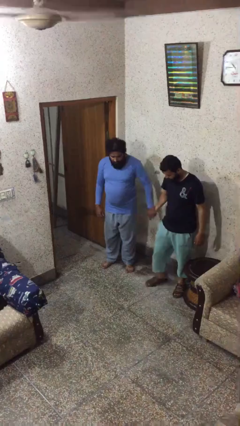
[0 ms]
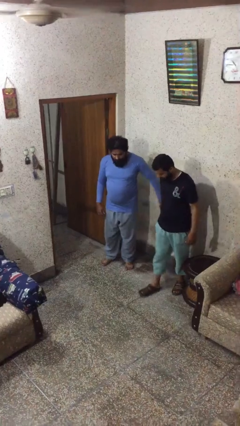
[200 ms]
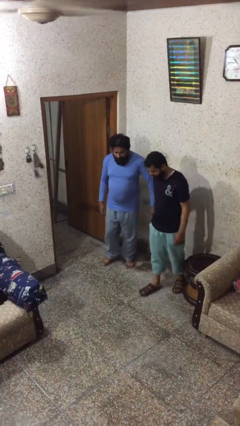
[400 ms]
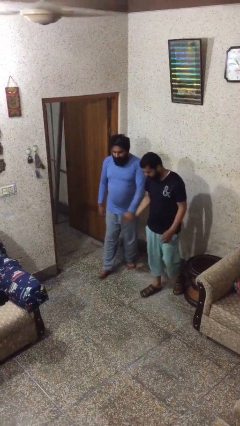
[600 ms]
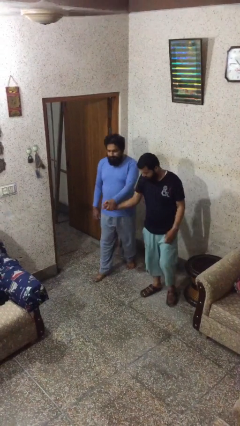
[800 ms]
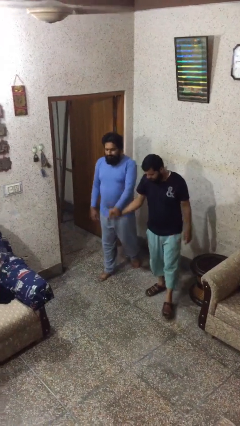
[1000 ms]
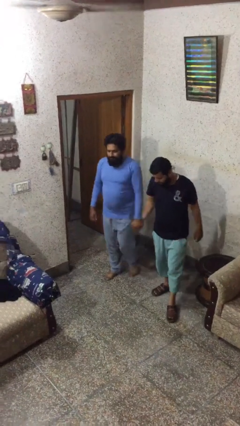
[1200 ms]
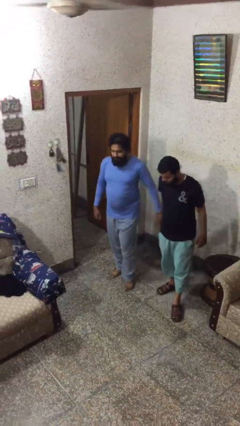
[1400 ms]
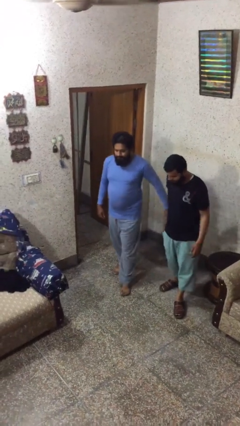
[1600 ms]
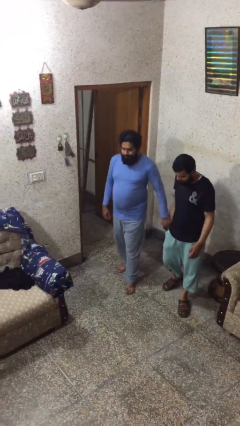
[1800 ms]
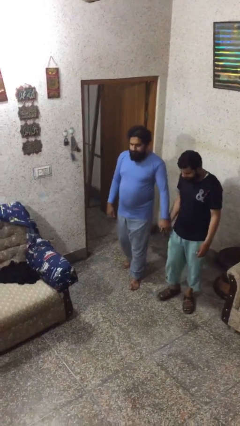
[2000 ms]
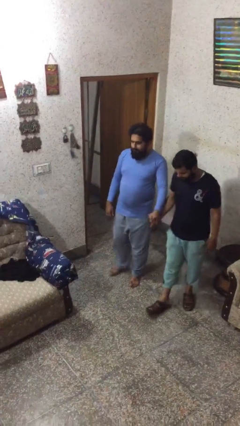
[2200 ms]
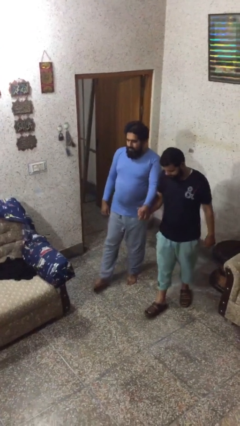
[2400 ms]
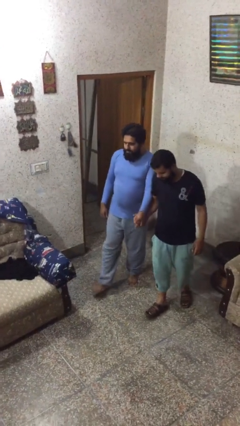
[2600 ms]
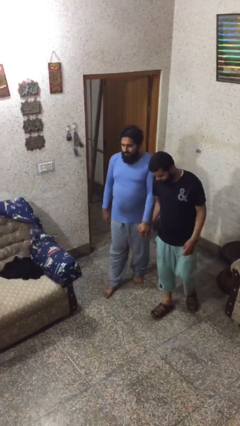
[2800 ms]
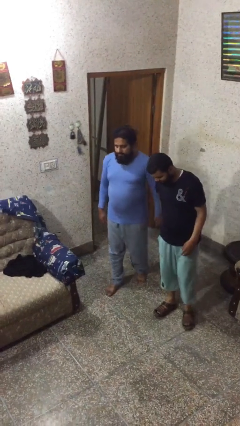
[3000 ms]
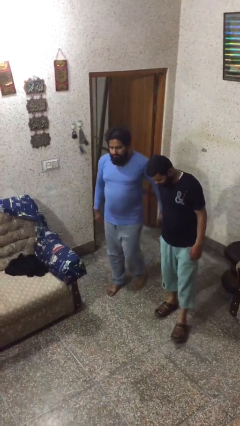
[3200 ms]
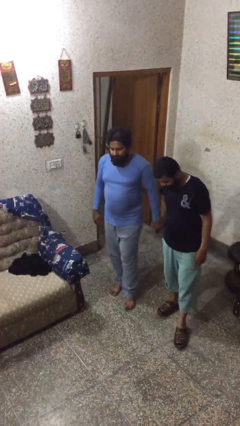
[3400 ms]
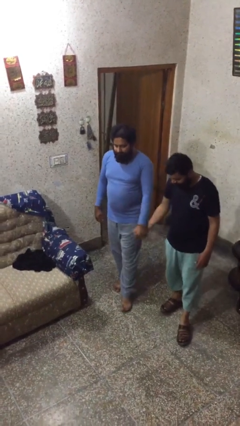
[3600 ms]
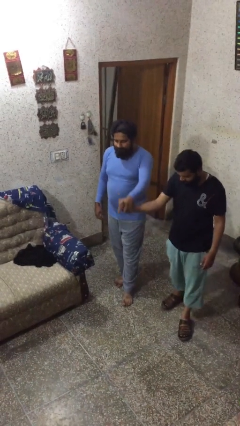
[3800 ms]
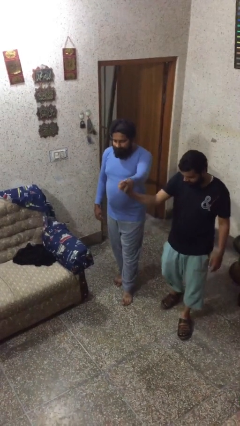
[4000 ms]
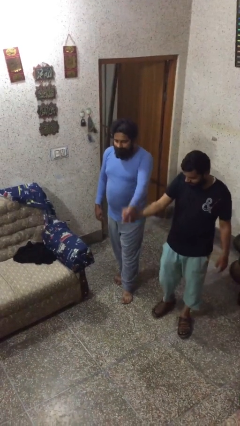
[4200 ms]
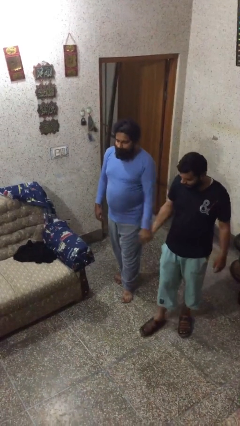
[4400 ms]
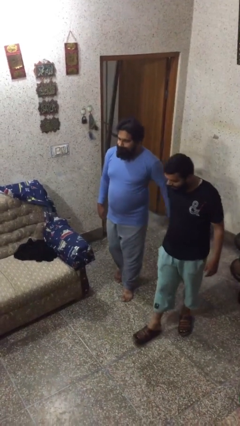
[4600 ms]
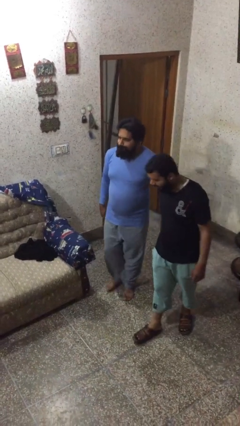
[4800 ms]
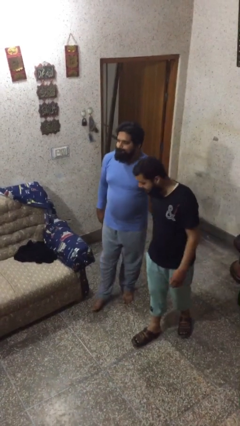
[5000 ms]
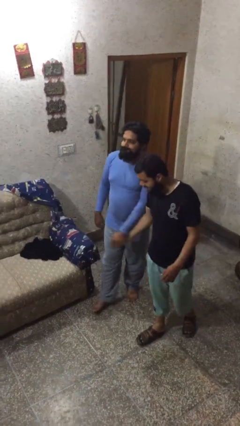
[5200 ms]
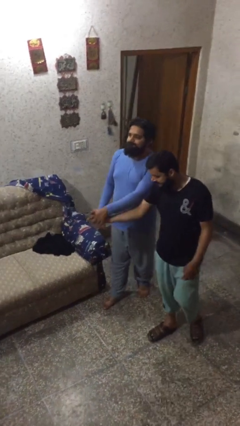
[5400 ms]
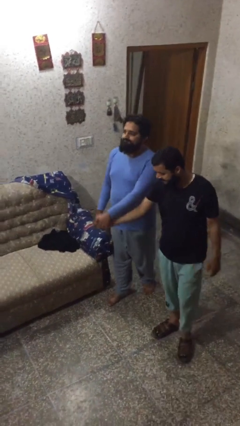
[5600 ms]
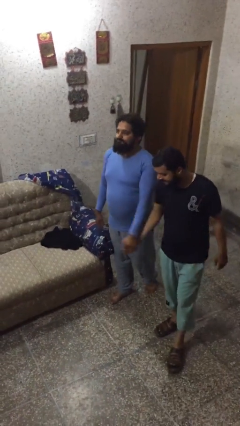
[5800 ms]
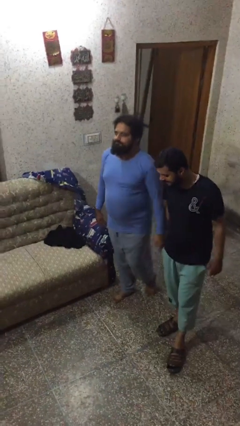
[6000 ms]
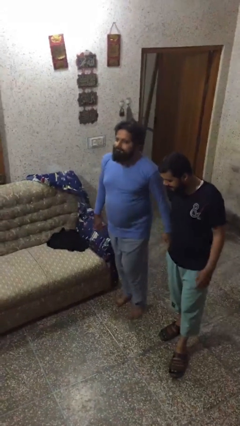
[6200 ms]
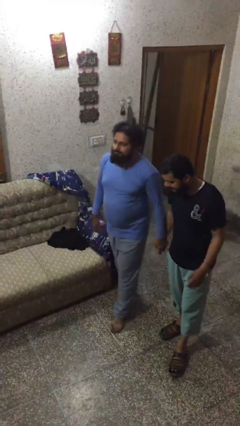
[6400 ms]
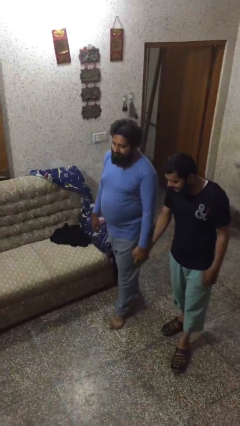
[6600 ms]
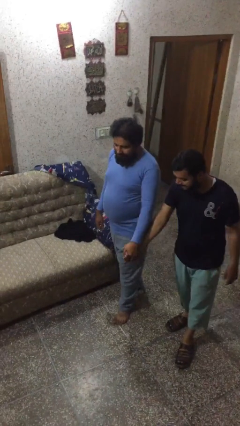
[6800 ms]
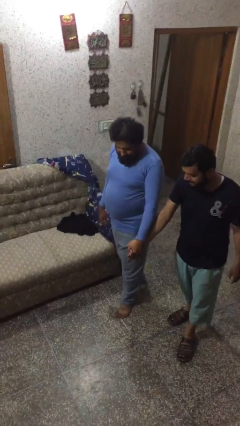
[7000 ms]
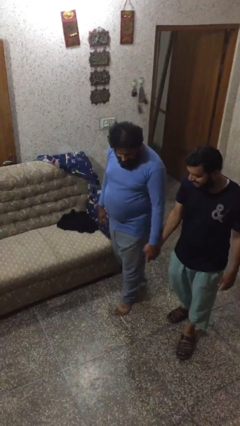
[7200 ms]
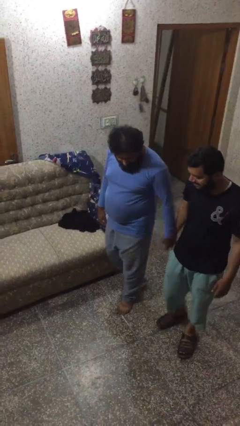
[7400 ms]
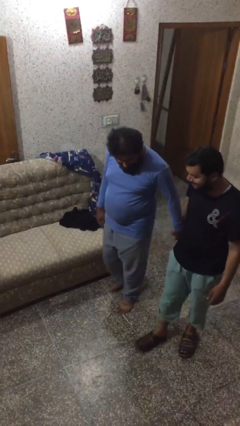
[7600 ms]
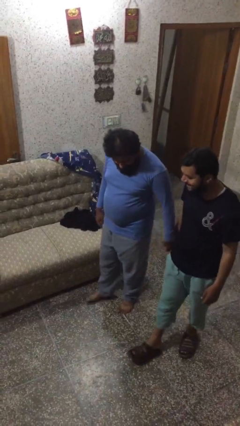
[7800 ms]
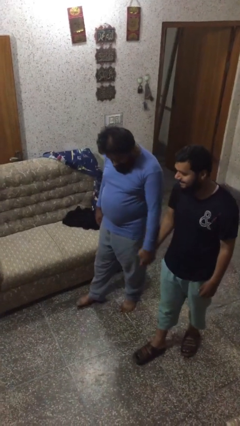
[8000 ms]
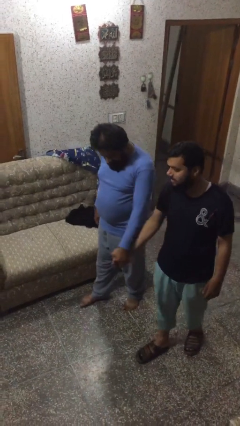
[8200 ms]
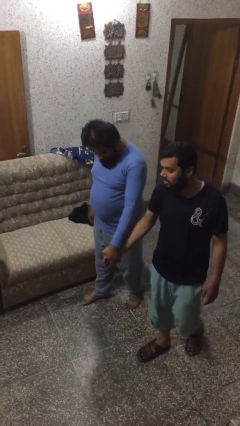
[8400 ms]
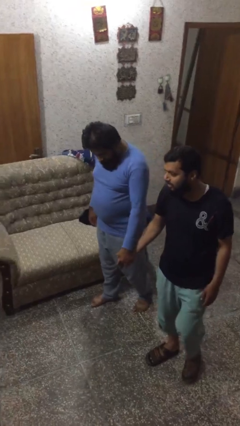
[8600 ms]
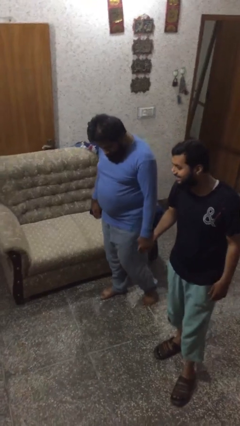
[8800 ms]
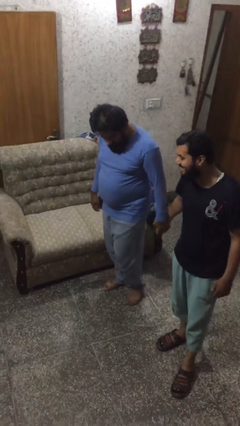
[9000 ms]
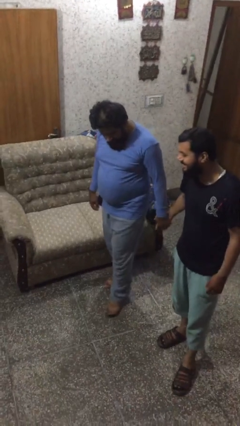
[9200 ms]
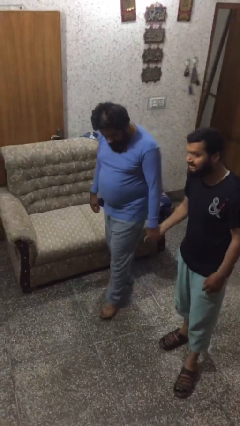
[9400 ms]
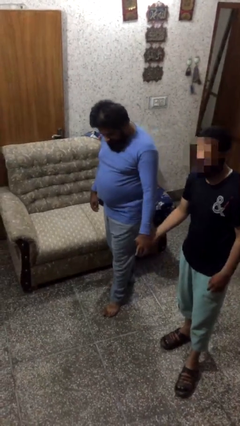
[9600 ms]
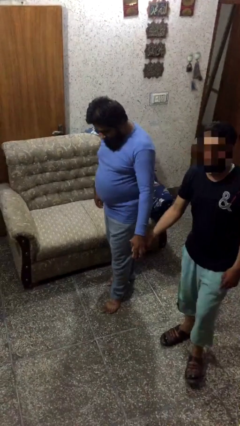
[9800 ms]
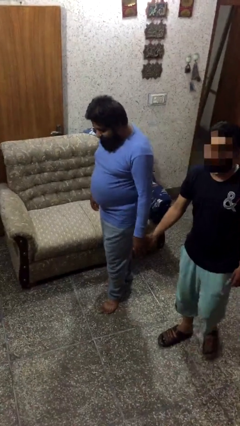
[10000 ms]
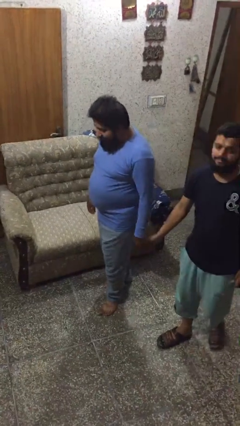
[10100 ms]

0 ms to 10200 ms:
person holds hand

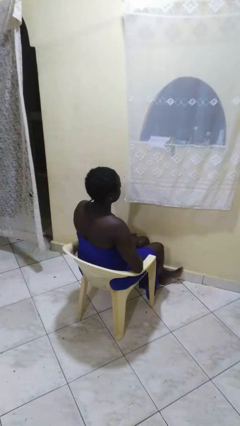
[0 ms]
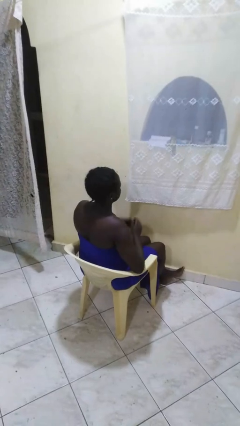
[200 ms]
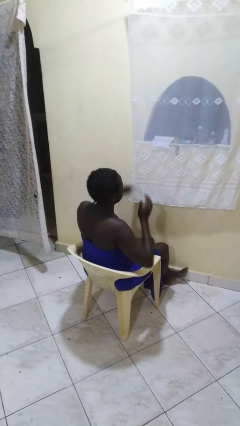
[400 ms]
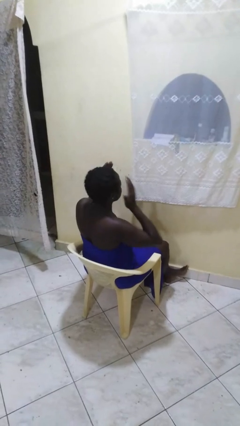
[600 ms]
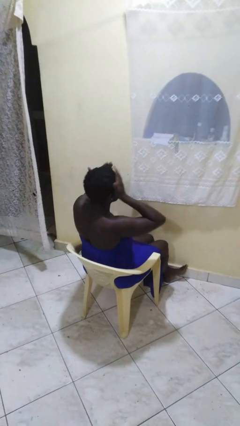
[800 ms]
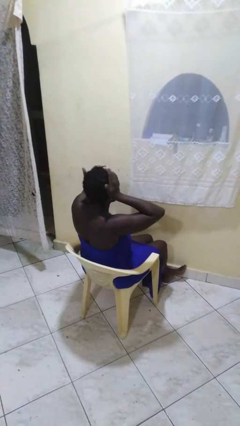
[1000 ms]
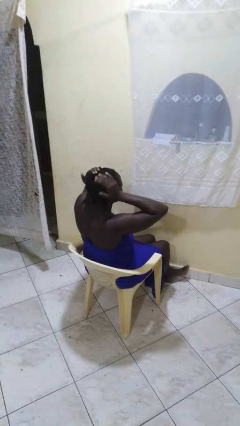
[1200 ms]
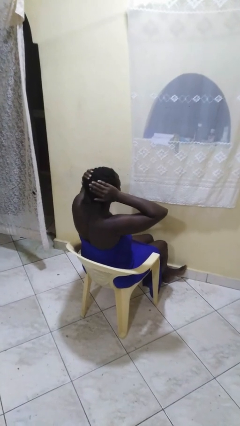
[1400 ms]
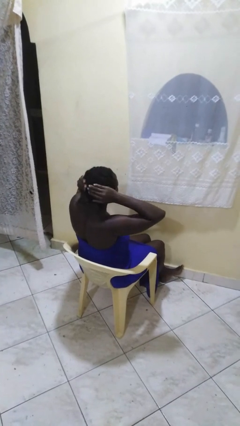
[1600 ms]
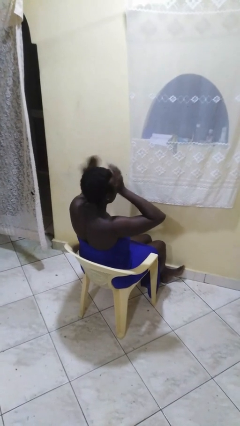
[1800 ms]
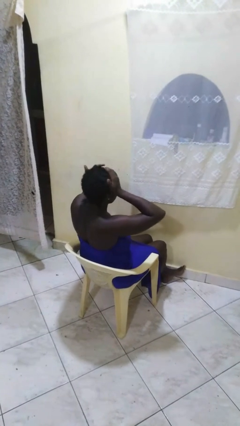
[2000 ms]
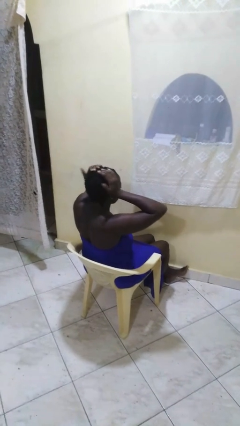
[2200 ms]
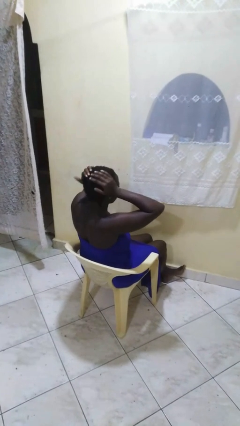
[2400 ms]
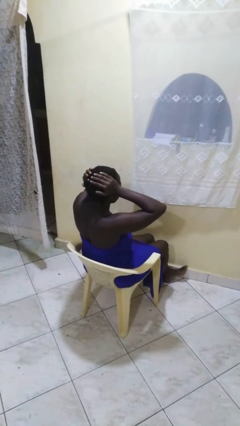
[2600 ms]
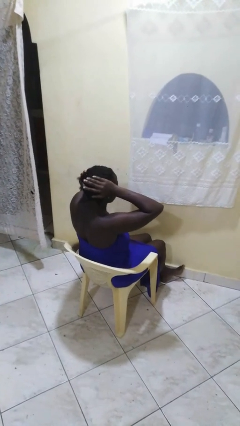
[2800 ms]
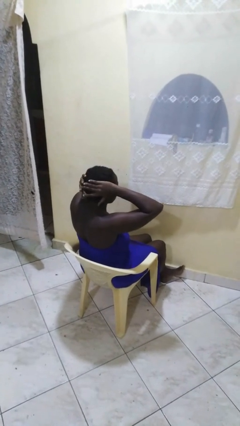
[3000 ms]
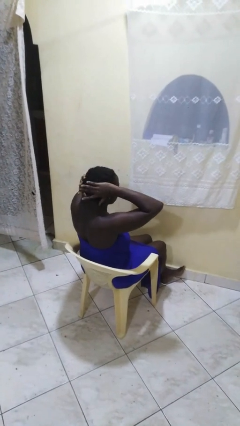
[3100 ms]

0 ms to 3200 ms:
person strokes hair

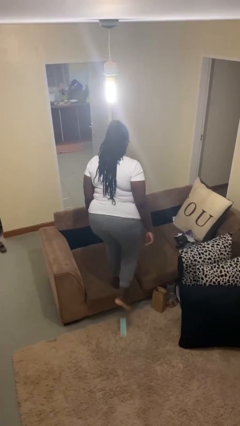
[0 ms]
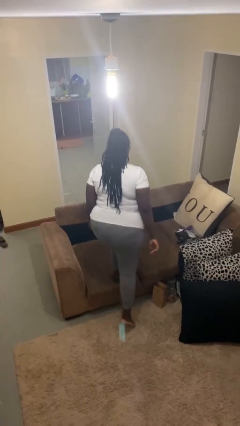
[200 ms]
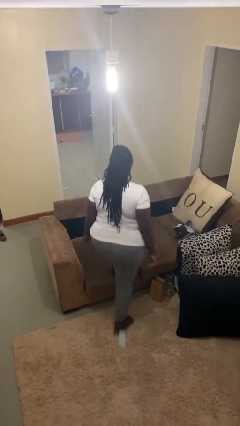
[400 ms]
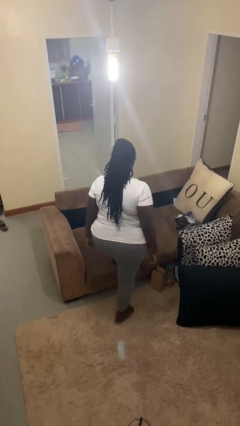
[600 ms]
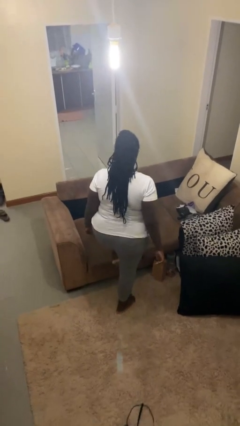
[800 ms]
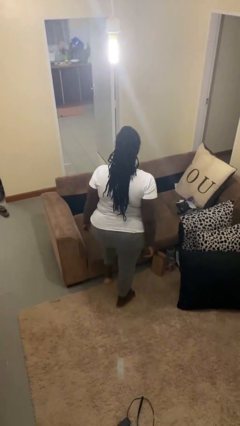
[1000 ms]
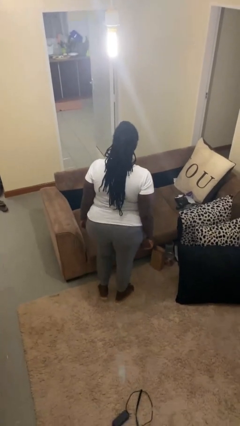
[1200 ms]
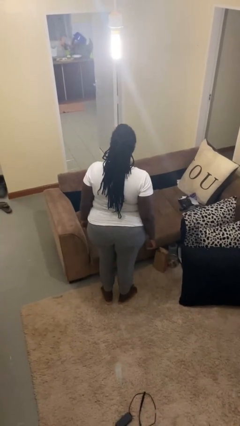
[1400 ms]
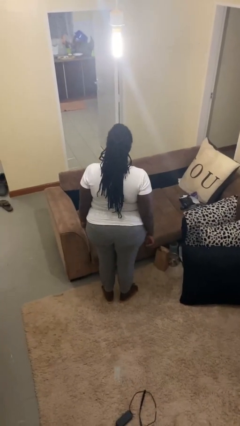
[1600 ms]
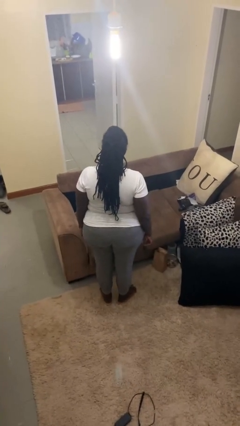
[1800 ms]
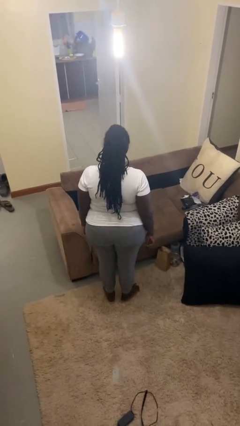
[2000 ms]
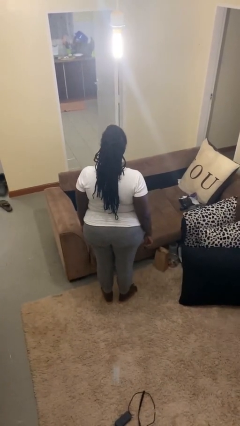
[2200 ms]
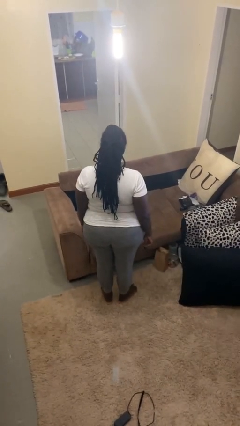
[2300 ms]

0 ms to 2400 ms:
person climbs off couch

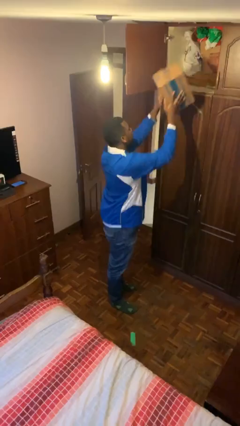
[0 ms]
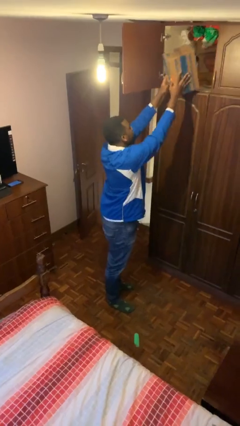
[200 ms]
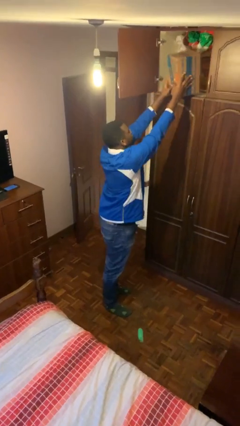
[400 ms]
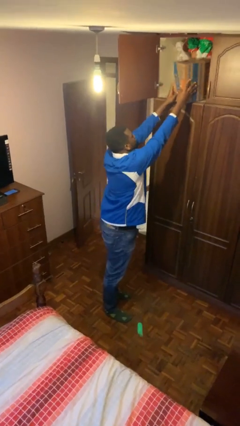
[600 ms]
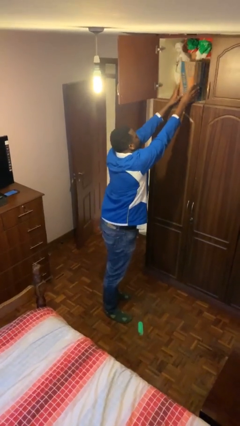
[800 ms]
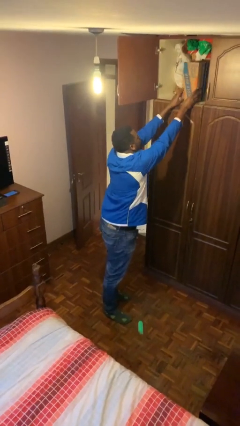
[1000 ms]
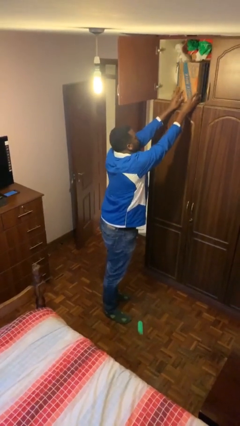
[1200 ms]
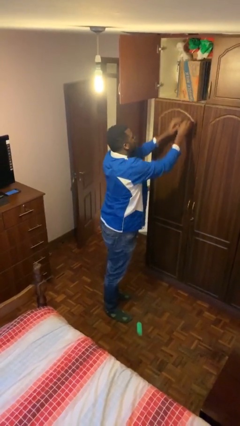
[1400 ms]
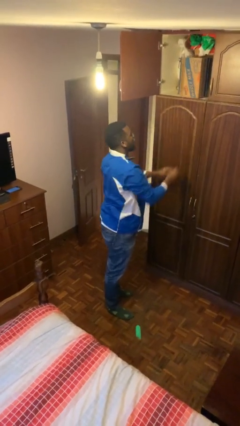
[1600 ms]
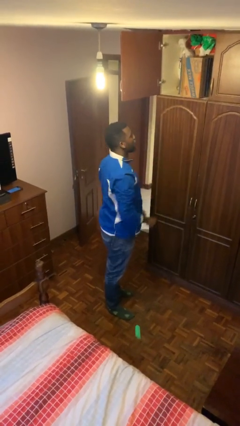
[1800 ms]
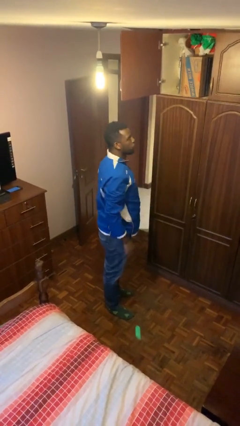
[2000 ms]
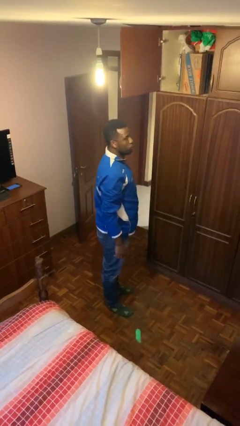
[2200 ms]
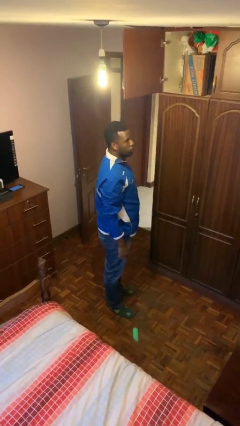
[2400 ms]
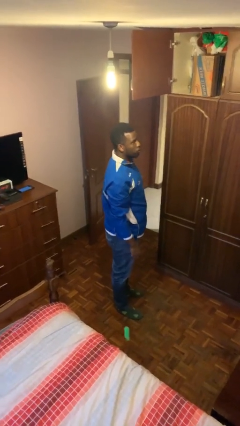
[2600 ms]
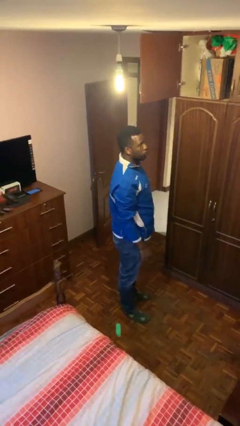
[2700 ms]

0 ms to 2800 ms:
person puts down object on shelf
